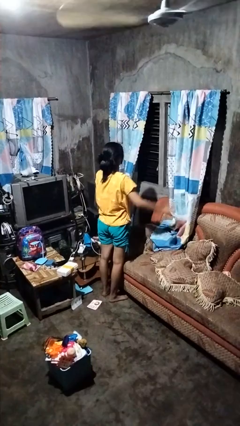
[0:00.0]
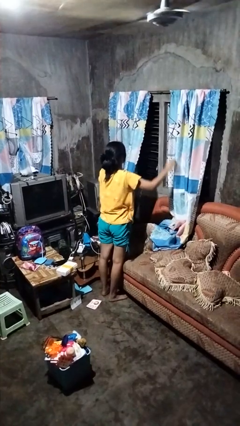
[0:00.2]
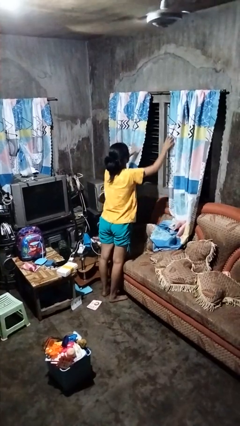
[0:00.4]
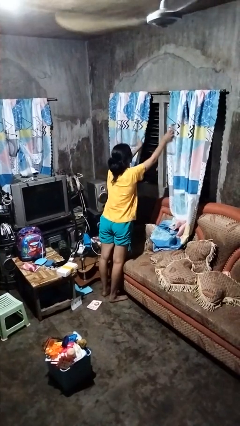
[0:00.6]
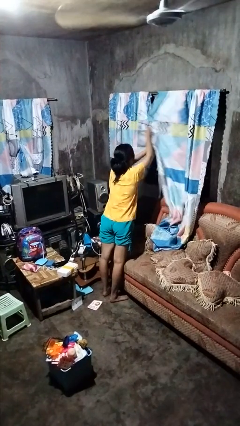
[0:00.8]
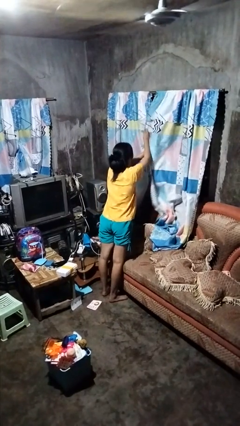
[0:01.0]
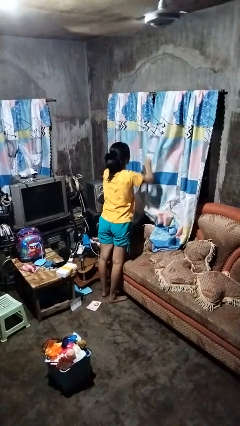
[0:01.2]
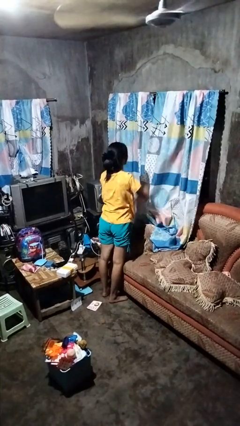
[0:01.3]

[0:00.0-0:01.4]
person closes curtains

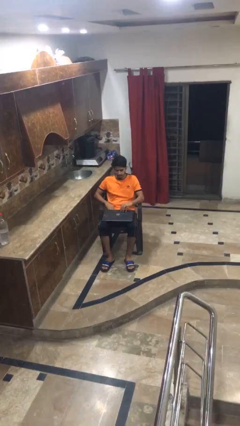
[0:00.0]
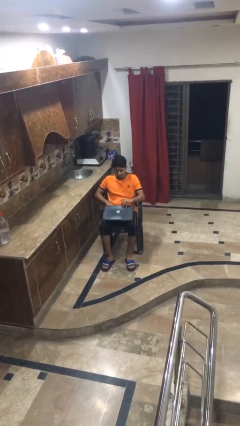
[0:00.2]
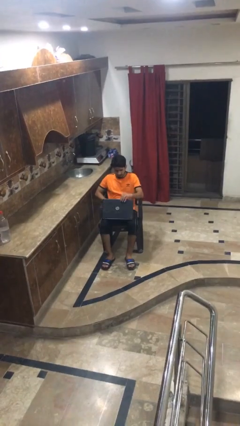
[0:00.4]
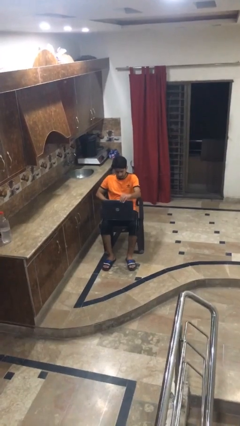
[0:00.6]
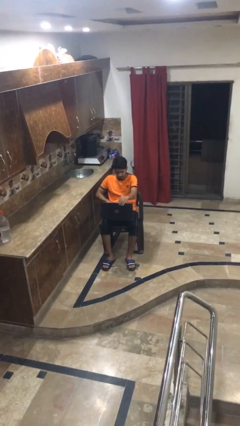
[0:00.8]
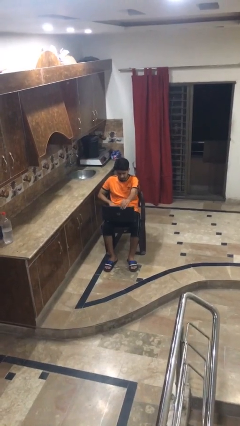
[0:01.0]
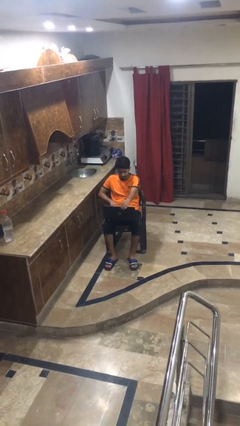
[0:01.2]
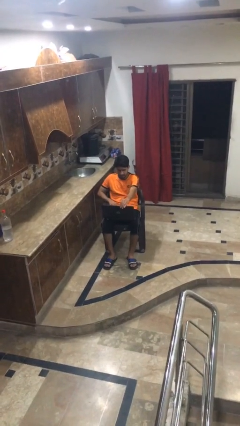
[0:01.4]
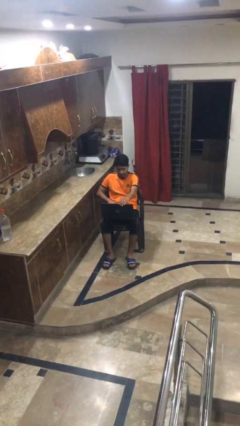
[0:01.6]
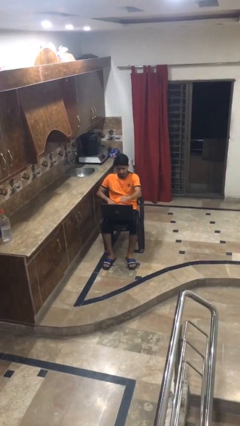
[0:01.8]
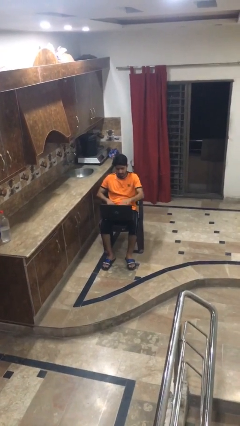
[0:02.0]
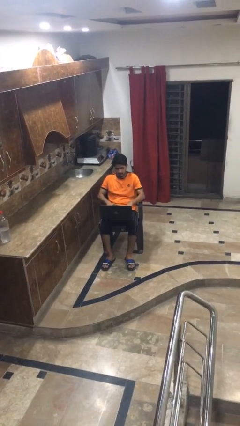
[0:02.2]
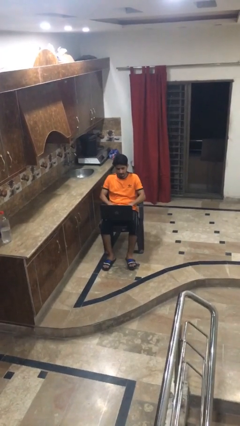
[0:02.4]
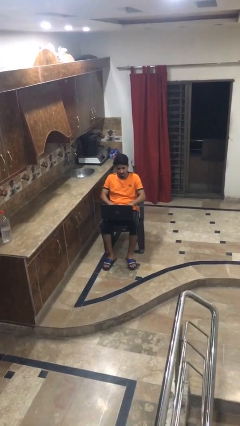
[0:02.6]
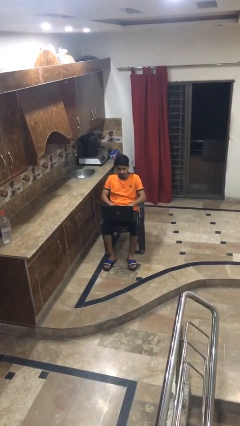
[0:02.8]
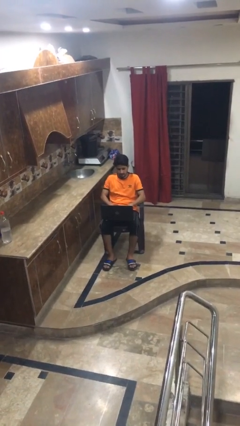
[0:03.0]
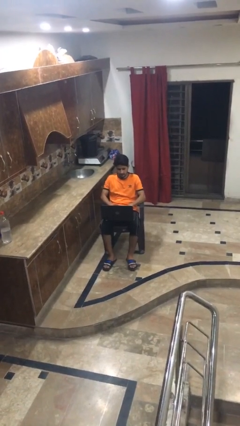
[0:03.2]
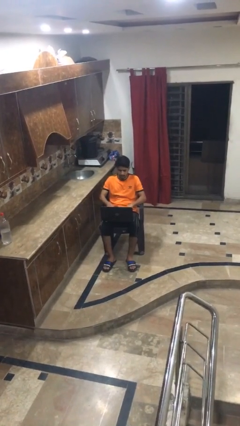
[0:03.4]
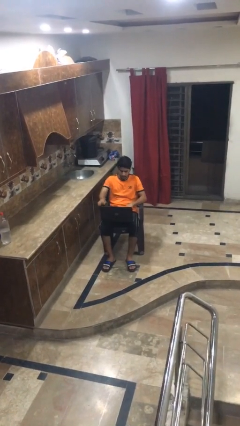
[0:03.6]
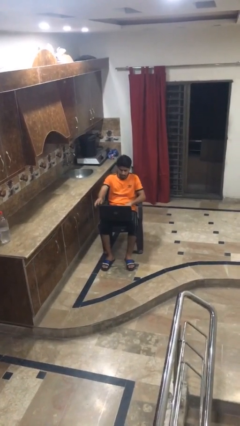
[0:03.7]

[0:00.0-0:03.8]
person opens laptop

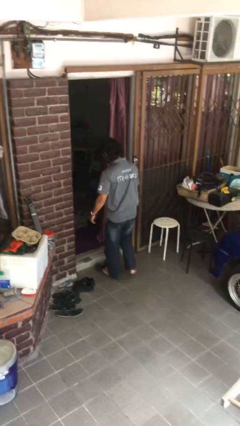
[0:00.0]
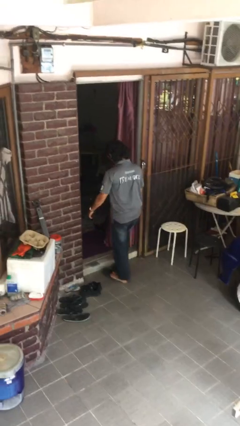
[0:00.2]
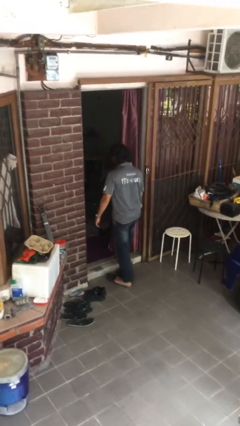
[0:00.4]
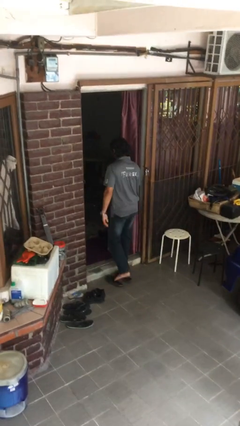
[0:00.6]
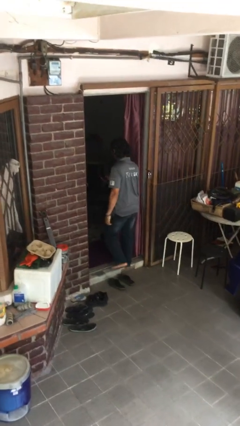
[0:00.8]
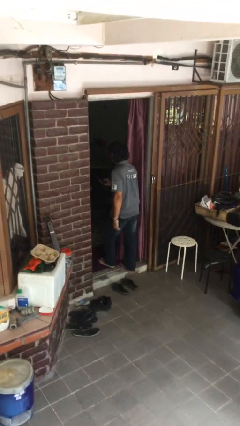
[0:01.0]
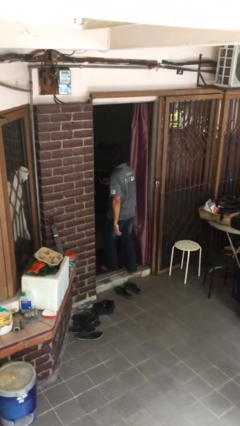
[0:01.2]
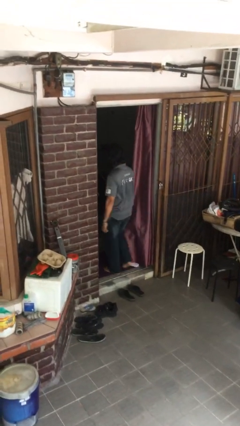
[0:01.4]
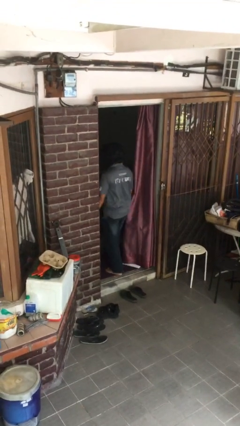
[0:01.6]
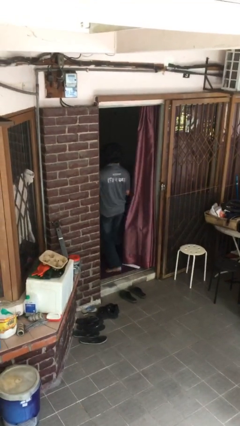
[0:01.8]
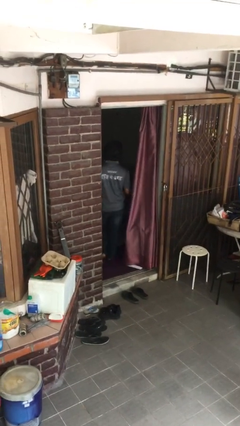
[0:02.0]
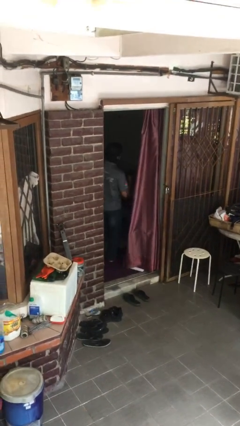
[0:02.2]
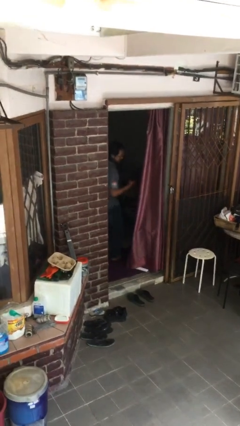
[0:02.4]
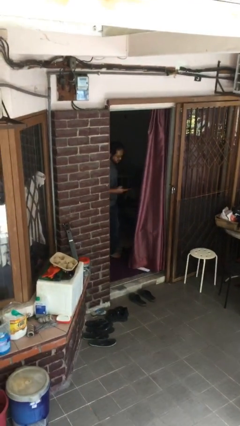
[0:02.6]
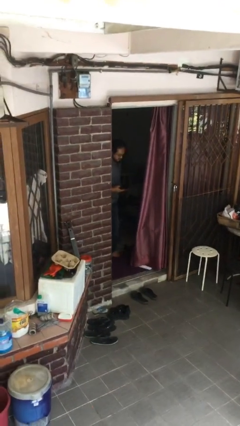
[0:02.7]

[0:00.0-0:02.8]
person exits scene through structure

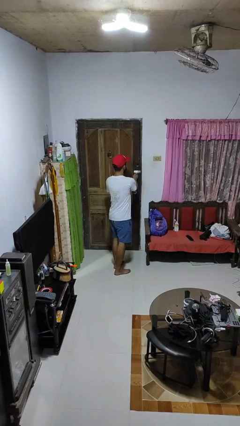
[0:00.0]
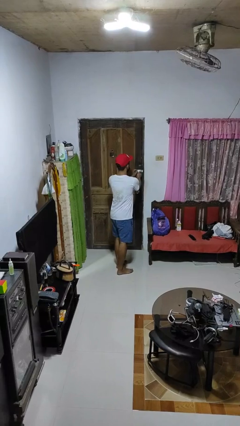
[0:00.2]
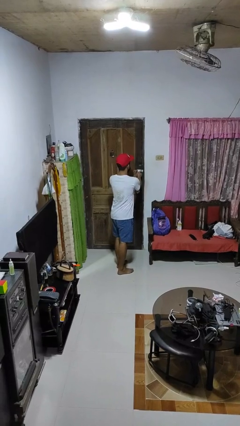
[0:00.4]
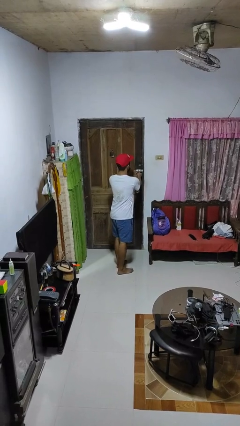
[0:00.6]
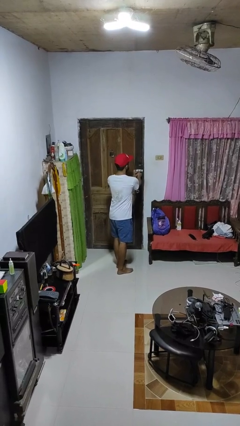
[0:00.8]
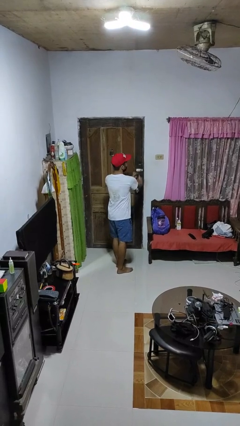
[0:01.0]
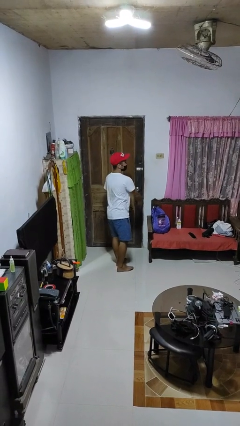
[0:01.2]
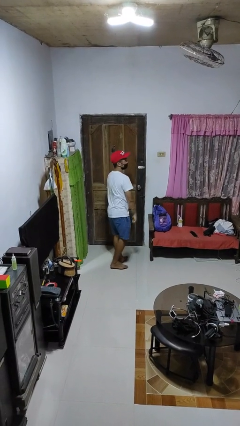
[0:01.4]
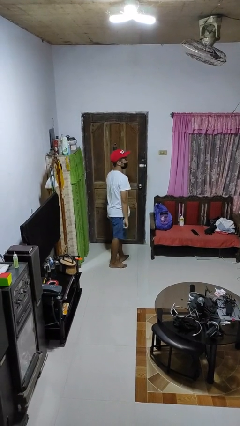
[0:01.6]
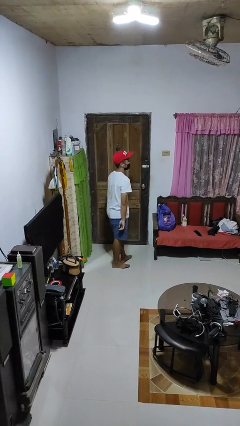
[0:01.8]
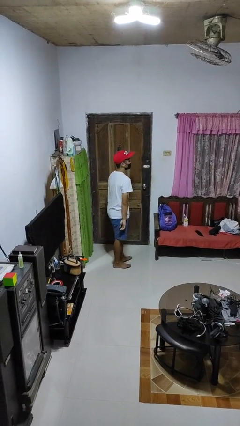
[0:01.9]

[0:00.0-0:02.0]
person locks door with keys

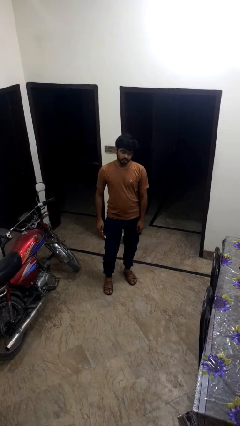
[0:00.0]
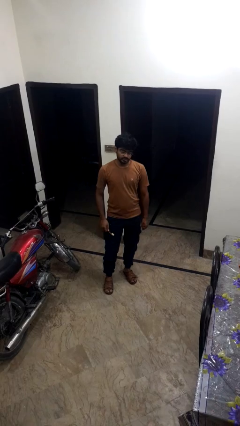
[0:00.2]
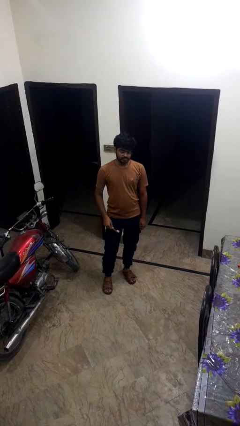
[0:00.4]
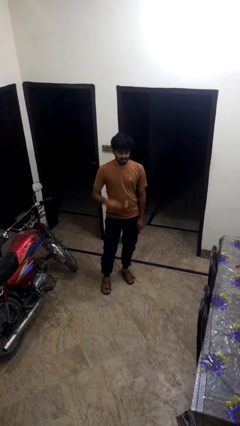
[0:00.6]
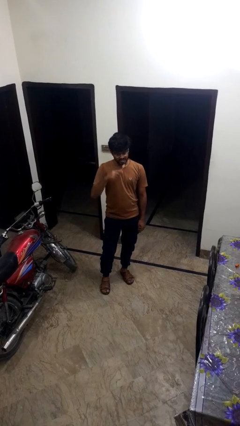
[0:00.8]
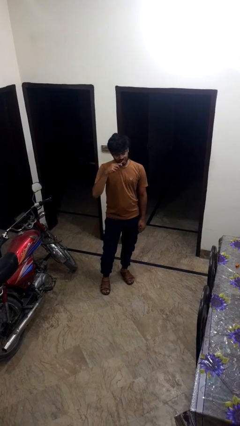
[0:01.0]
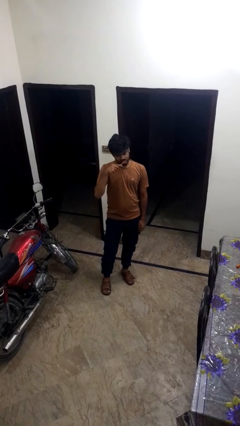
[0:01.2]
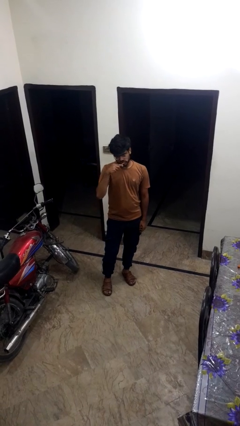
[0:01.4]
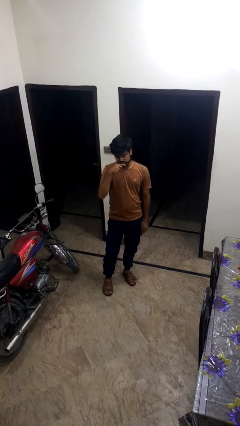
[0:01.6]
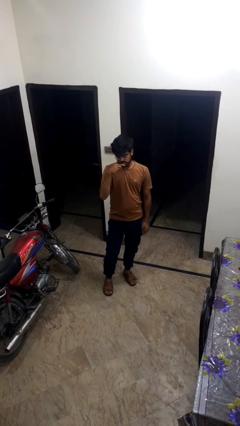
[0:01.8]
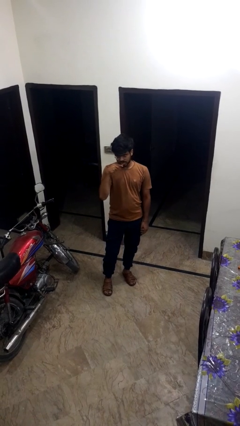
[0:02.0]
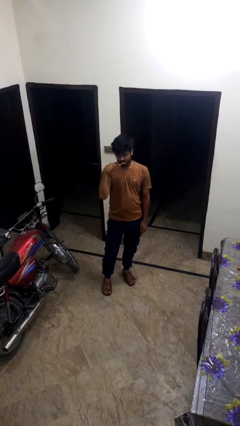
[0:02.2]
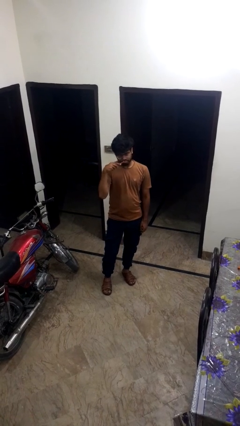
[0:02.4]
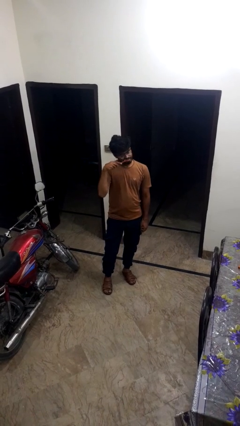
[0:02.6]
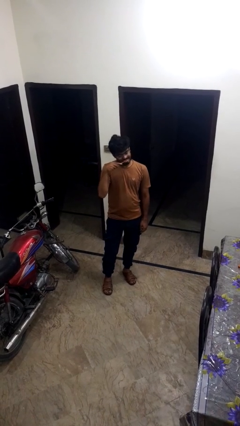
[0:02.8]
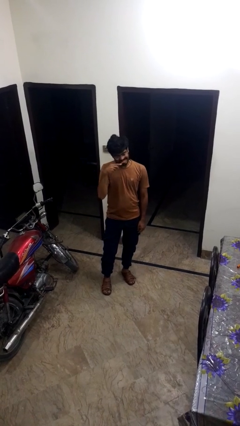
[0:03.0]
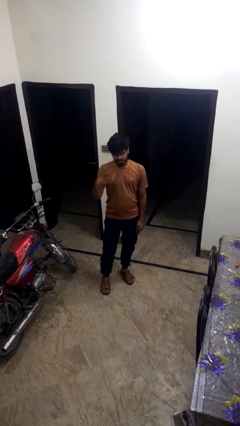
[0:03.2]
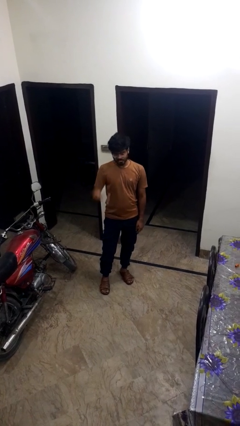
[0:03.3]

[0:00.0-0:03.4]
person brushes teeth

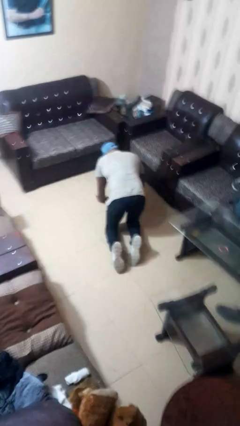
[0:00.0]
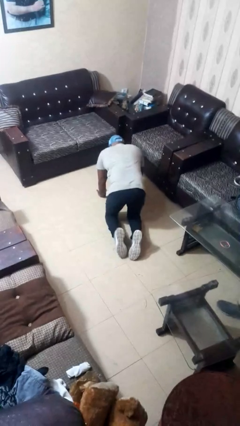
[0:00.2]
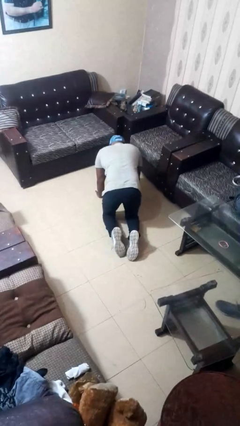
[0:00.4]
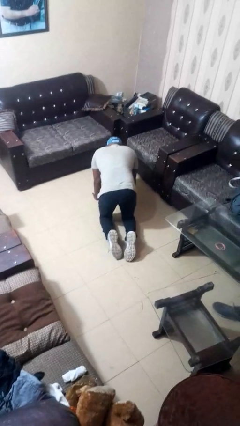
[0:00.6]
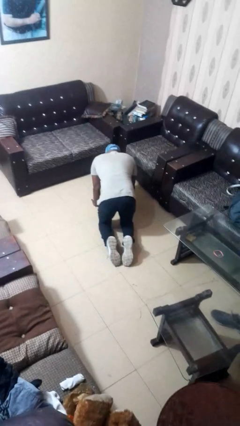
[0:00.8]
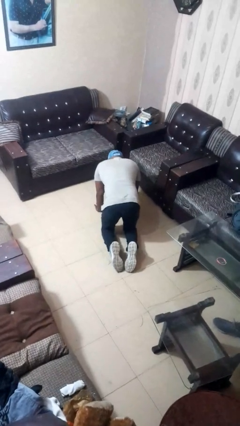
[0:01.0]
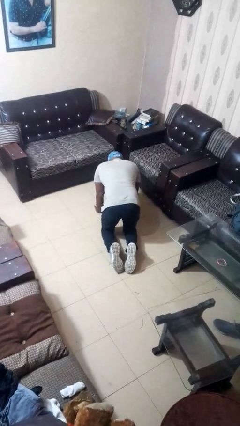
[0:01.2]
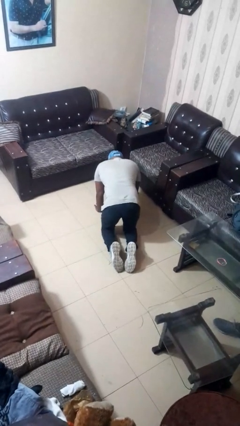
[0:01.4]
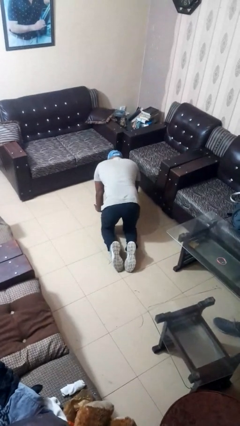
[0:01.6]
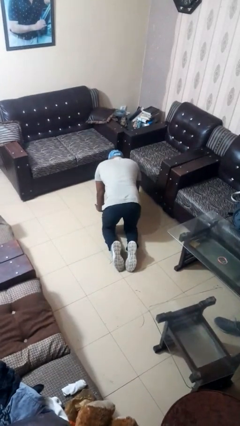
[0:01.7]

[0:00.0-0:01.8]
person crawls

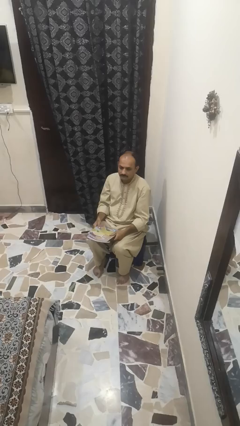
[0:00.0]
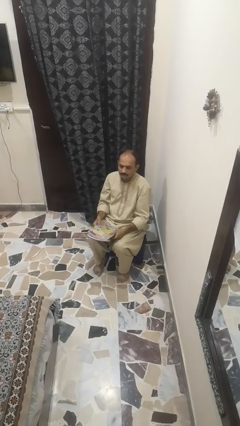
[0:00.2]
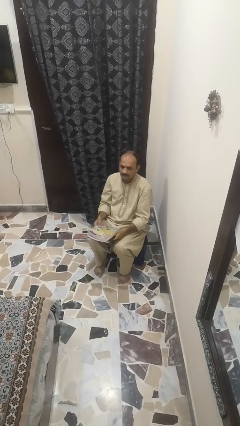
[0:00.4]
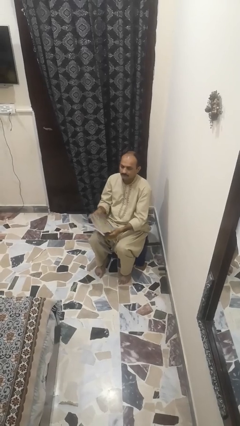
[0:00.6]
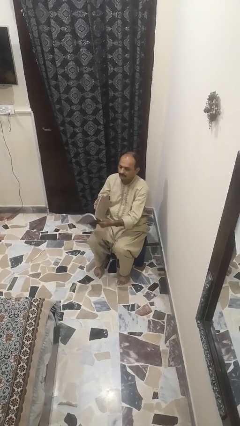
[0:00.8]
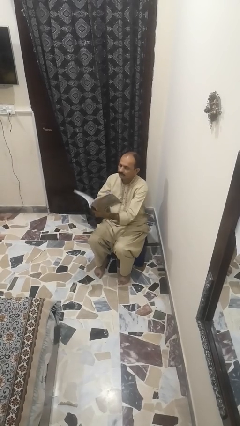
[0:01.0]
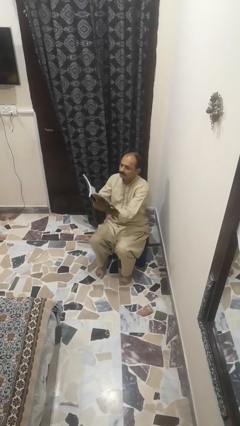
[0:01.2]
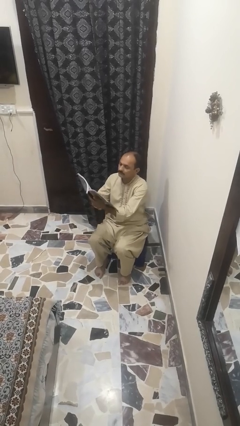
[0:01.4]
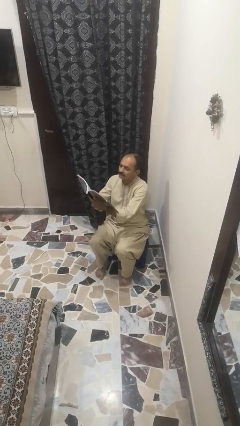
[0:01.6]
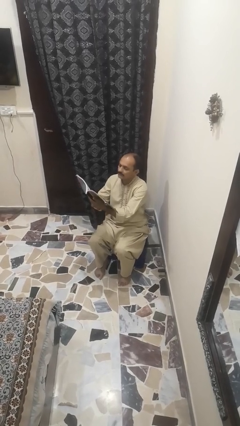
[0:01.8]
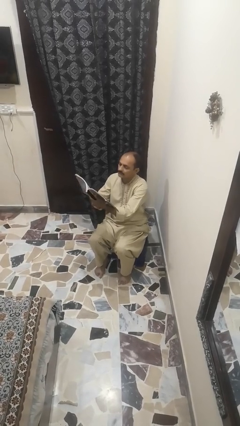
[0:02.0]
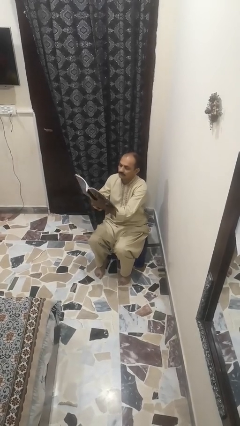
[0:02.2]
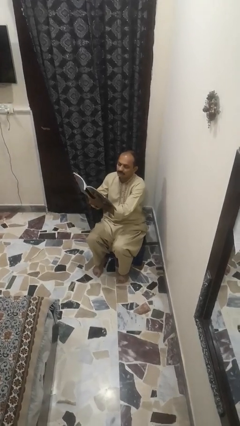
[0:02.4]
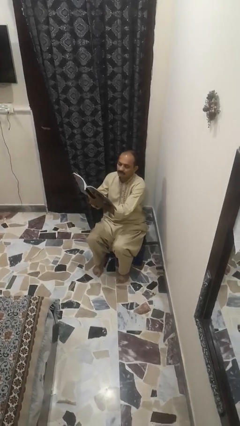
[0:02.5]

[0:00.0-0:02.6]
person reads book
